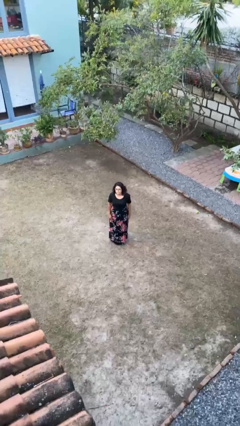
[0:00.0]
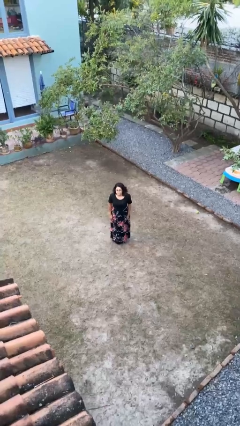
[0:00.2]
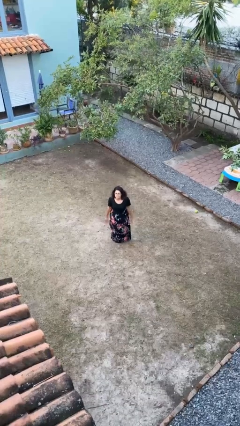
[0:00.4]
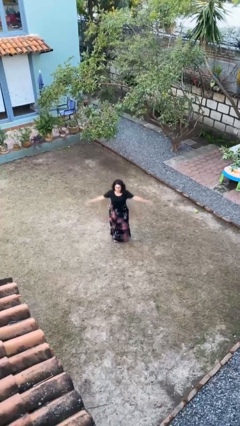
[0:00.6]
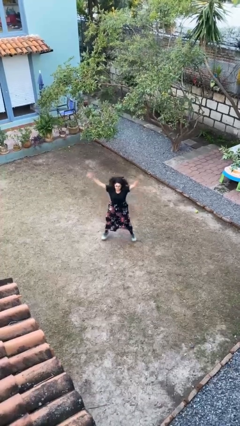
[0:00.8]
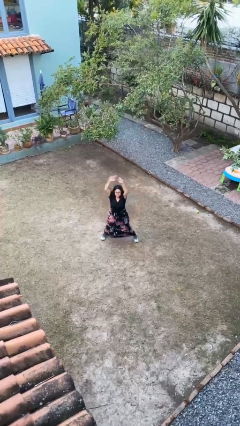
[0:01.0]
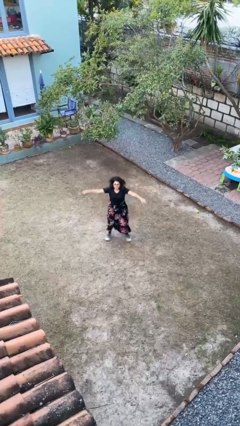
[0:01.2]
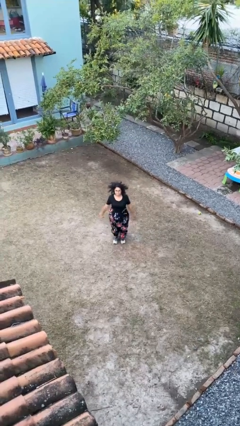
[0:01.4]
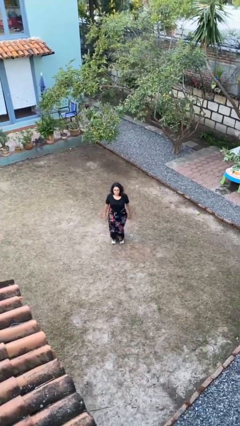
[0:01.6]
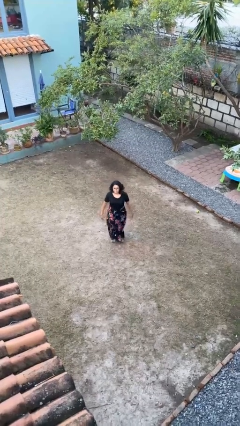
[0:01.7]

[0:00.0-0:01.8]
person exercises with jumping jacks

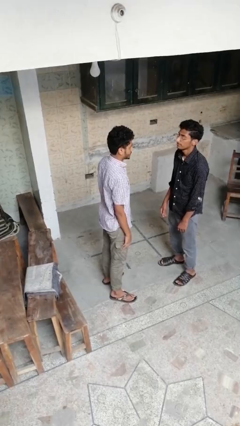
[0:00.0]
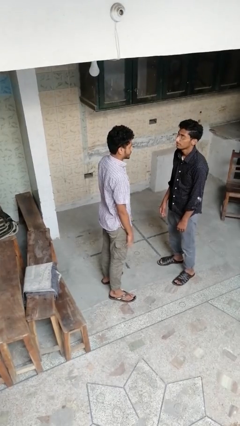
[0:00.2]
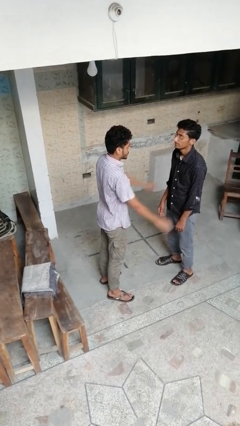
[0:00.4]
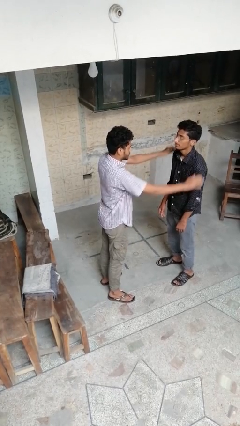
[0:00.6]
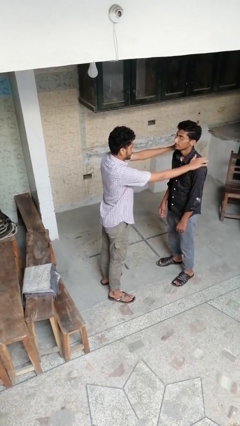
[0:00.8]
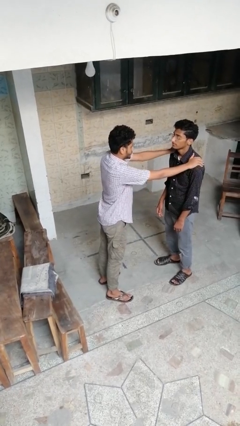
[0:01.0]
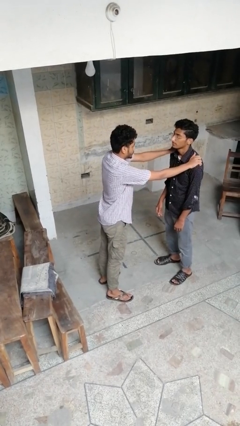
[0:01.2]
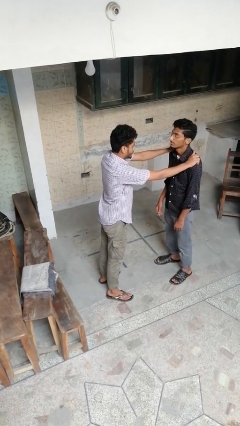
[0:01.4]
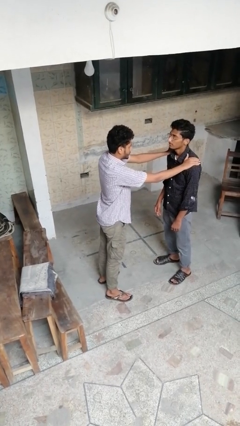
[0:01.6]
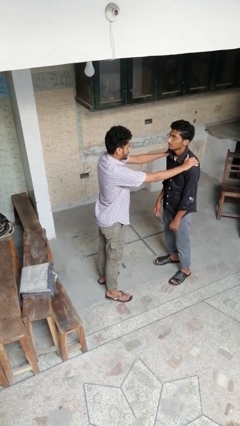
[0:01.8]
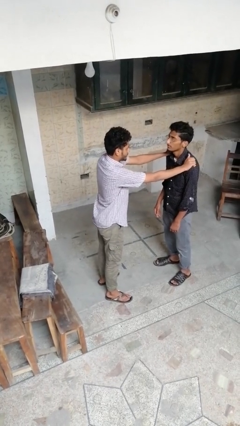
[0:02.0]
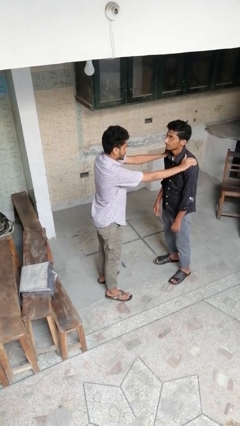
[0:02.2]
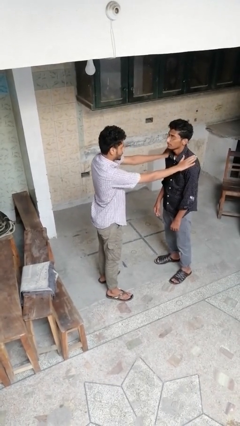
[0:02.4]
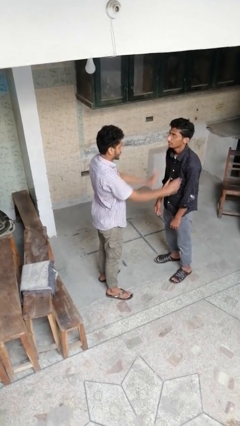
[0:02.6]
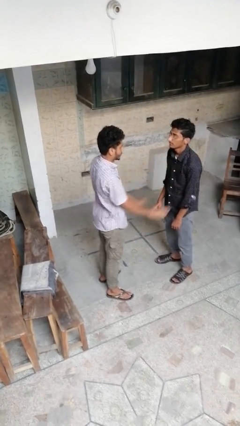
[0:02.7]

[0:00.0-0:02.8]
person pounds shoulders of person

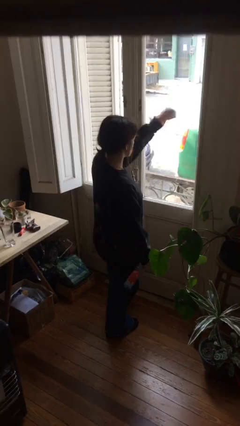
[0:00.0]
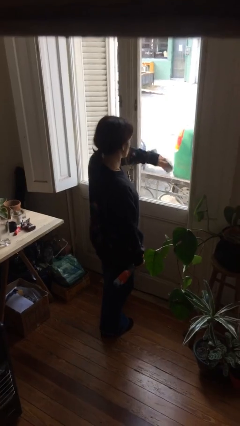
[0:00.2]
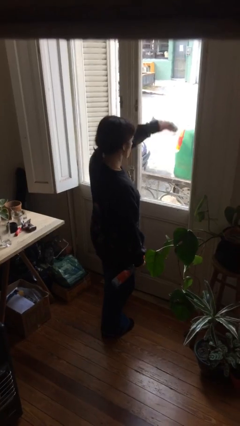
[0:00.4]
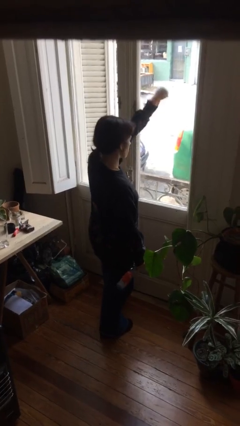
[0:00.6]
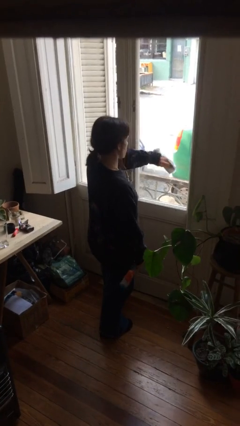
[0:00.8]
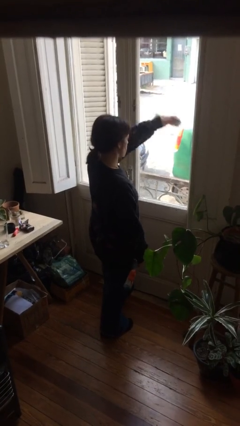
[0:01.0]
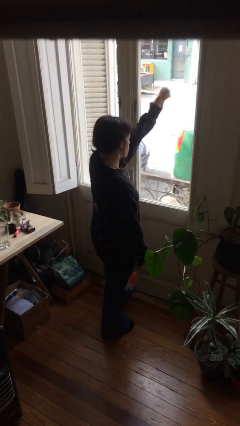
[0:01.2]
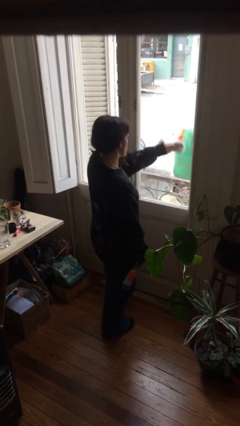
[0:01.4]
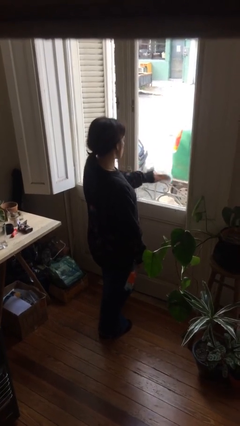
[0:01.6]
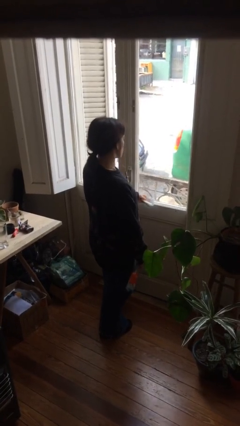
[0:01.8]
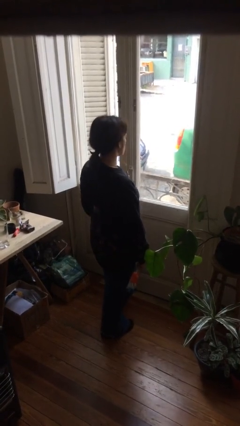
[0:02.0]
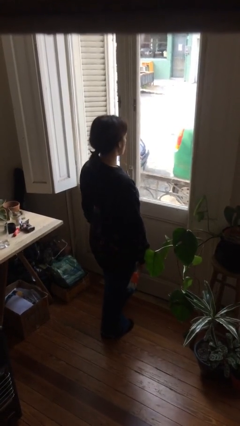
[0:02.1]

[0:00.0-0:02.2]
person washes window

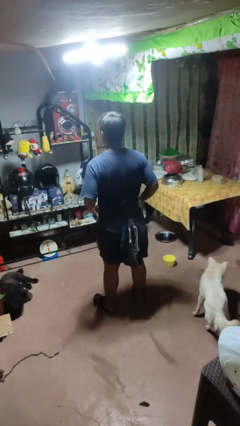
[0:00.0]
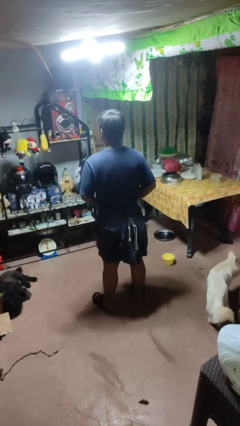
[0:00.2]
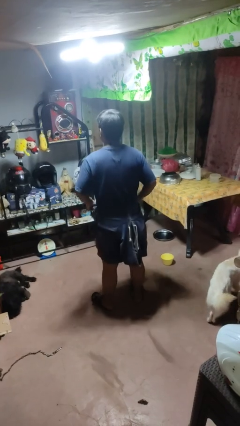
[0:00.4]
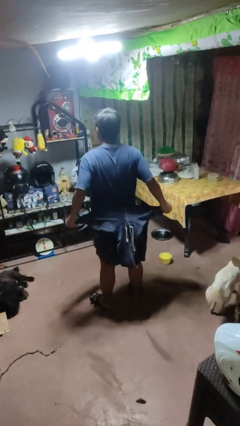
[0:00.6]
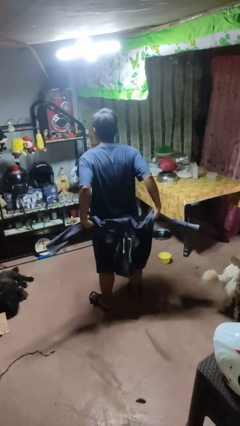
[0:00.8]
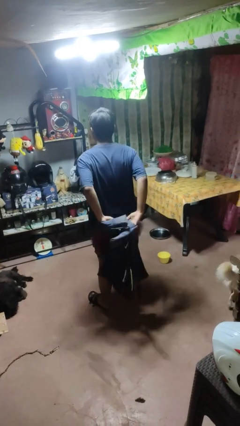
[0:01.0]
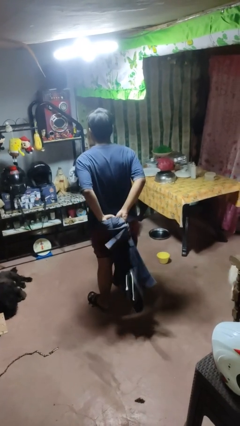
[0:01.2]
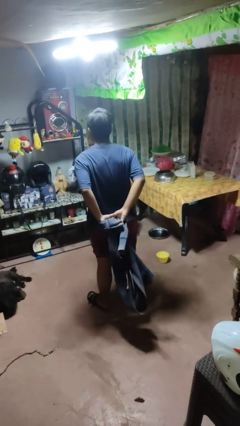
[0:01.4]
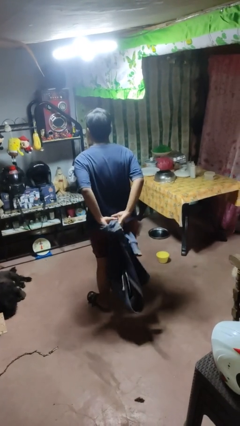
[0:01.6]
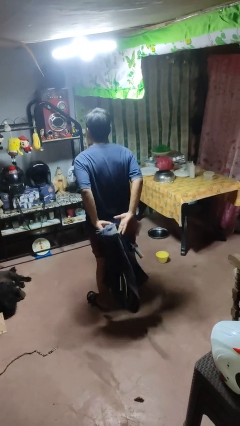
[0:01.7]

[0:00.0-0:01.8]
person unties jacket around waist

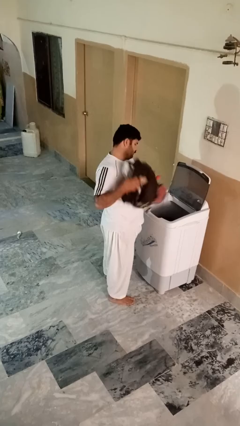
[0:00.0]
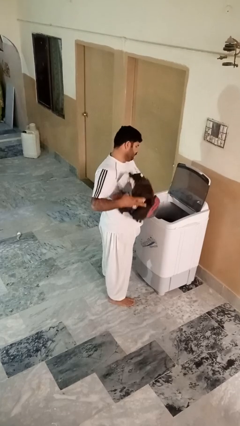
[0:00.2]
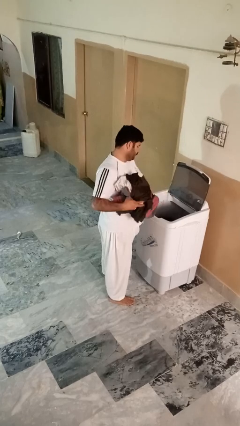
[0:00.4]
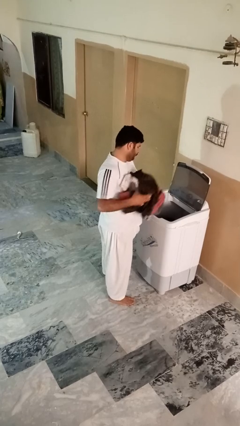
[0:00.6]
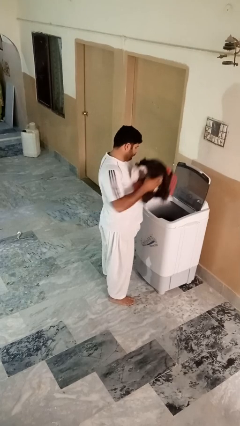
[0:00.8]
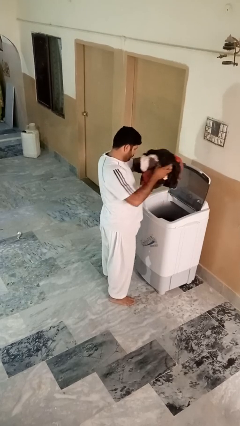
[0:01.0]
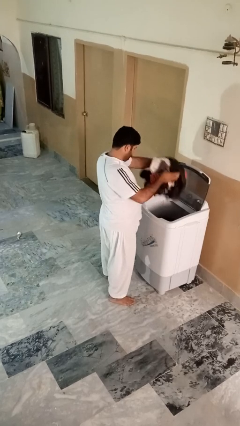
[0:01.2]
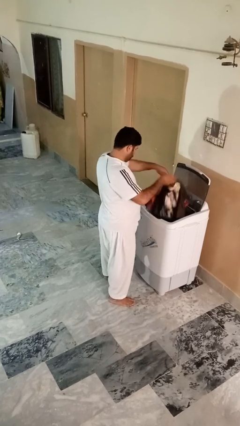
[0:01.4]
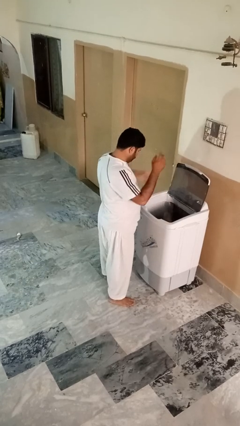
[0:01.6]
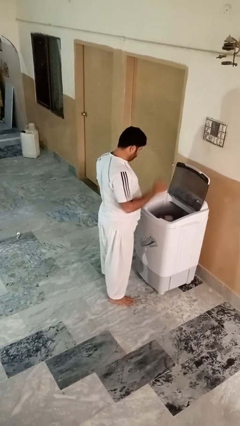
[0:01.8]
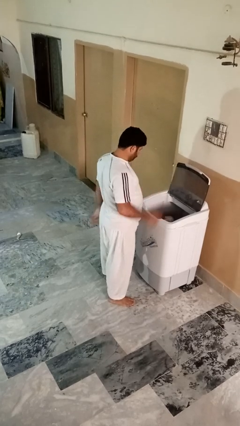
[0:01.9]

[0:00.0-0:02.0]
person loads clotheswasher

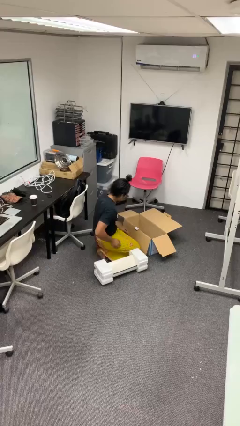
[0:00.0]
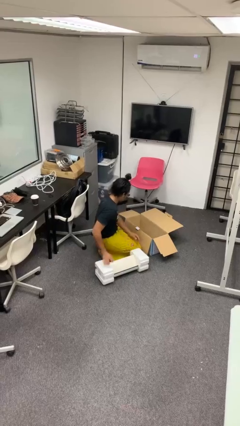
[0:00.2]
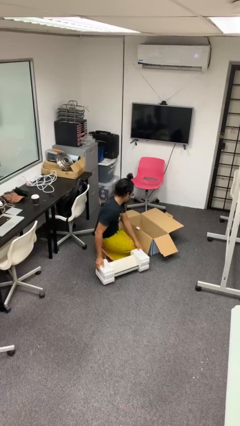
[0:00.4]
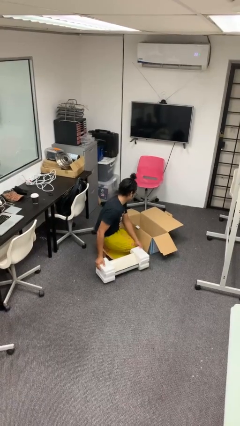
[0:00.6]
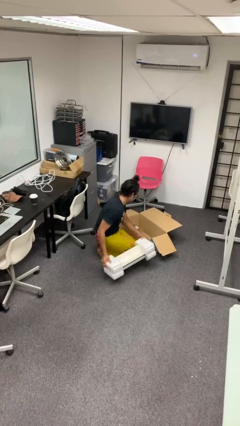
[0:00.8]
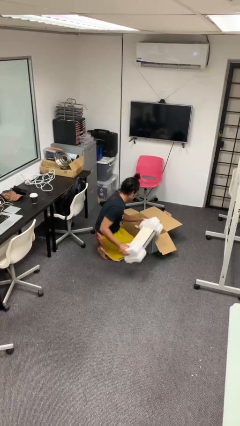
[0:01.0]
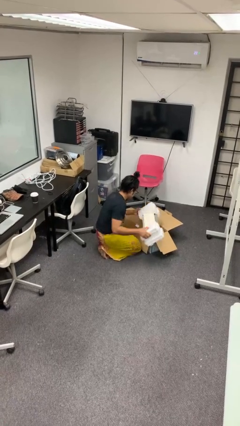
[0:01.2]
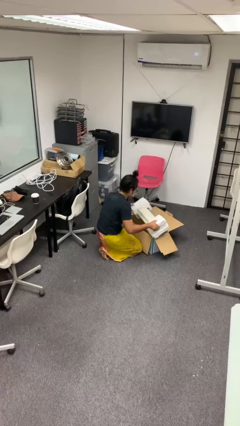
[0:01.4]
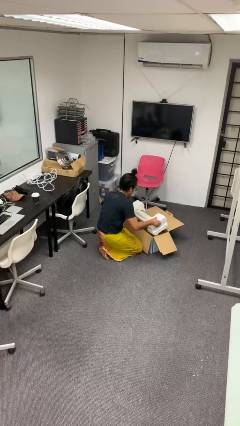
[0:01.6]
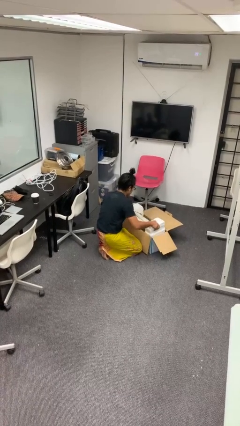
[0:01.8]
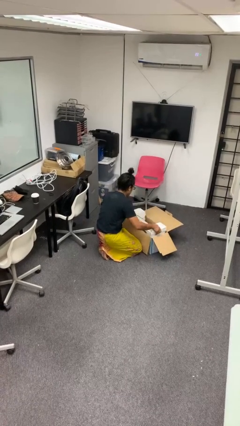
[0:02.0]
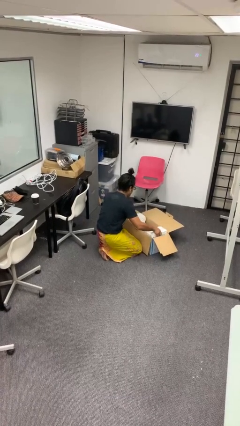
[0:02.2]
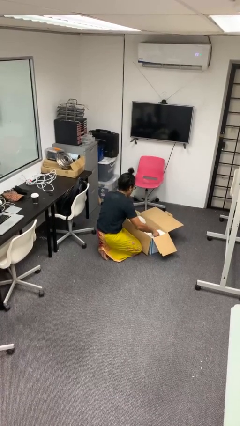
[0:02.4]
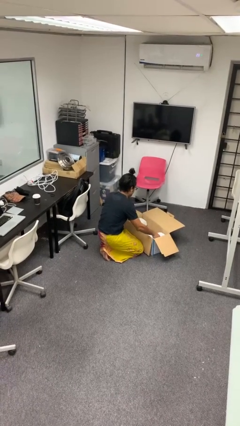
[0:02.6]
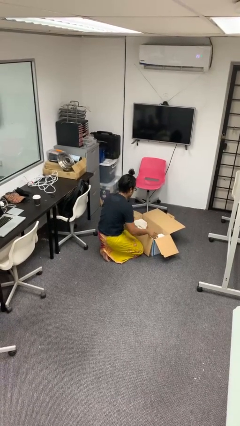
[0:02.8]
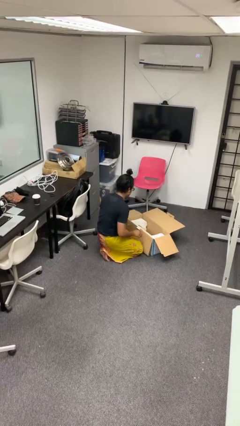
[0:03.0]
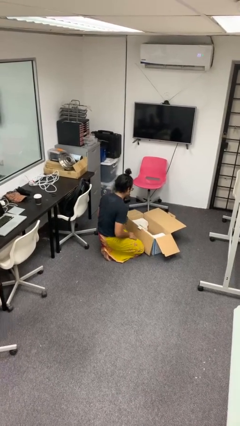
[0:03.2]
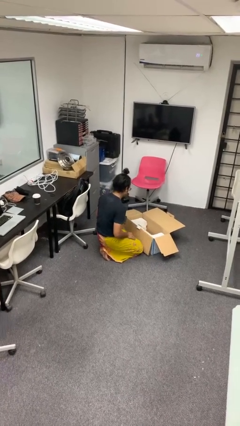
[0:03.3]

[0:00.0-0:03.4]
person puts object into box

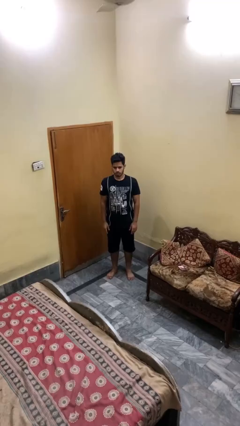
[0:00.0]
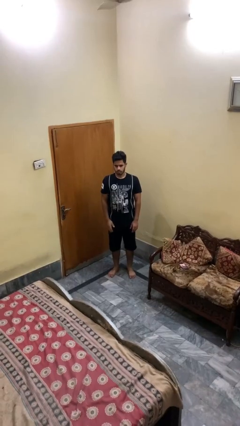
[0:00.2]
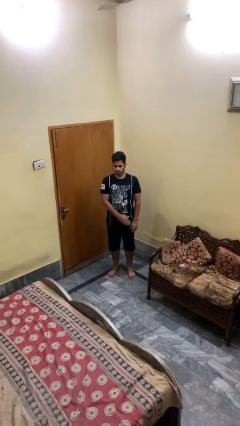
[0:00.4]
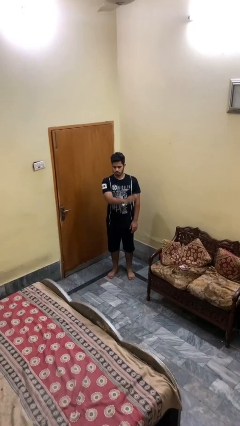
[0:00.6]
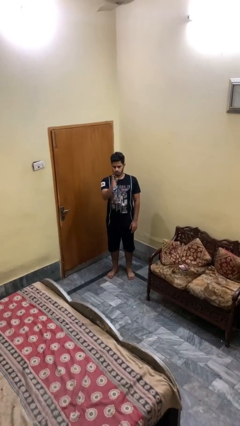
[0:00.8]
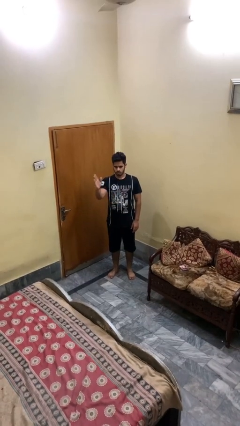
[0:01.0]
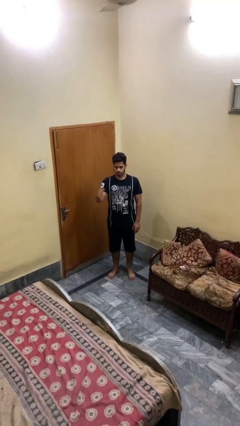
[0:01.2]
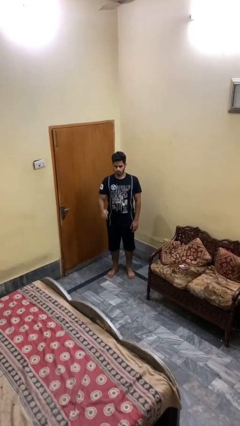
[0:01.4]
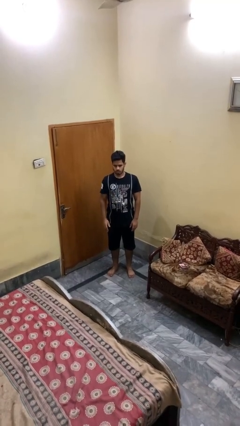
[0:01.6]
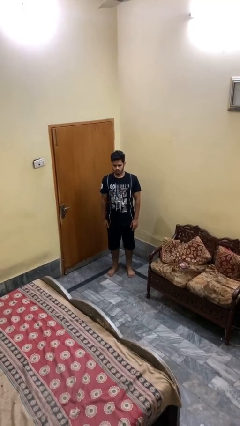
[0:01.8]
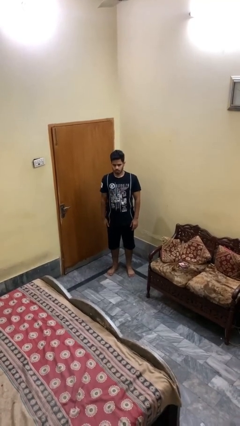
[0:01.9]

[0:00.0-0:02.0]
person gestures swipe right

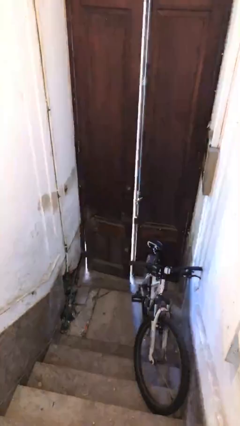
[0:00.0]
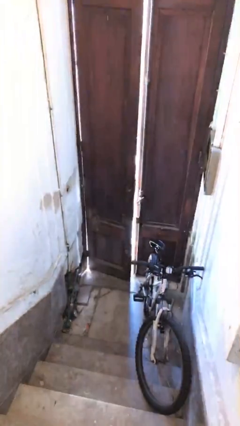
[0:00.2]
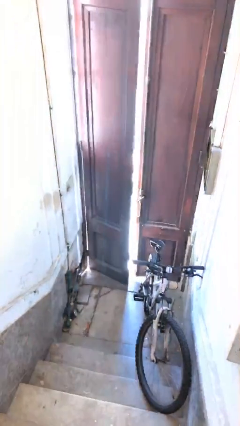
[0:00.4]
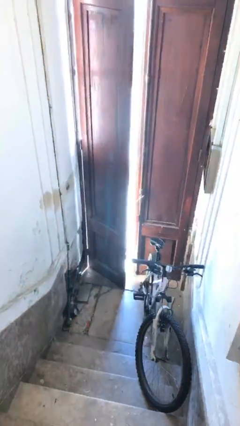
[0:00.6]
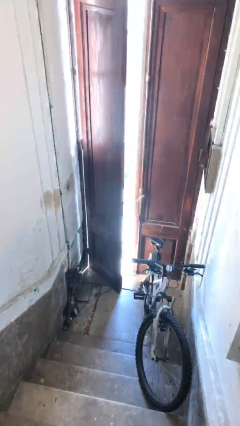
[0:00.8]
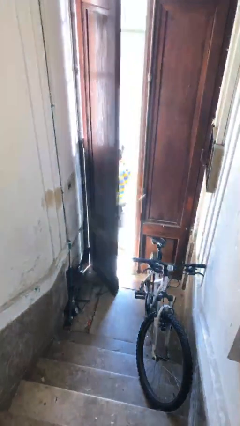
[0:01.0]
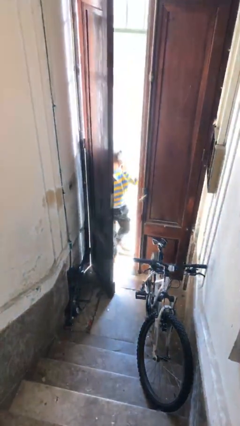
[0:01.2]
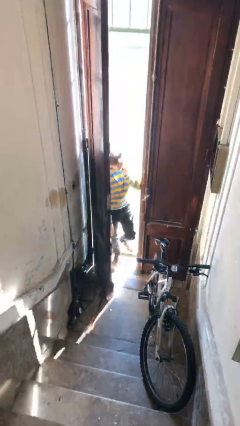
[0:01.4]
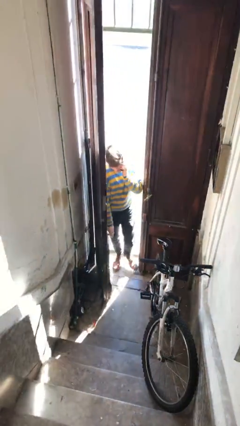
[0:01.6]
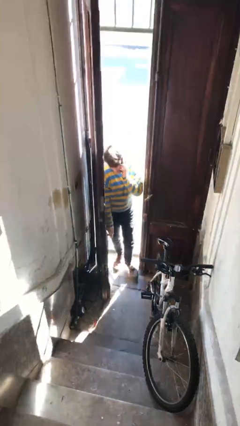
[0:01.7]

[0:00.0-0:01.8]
person opens facility door
